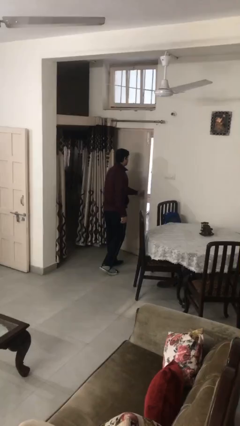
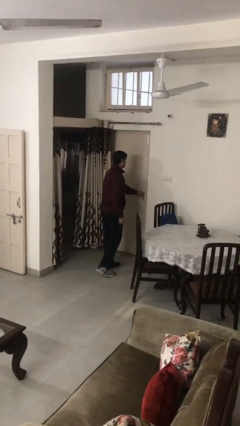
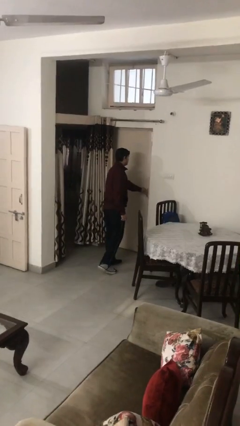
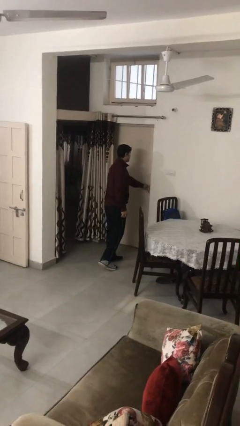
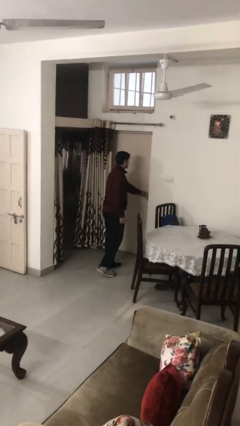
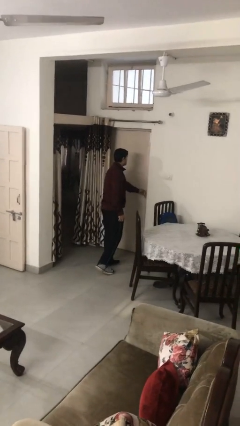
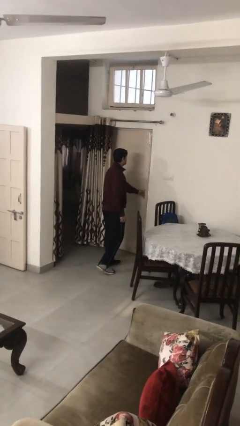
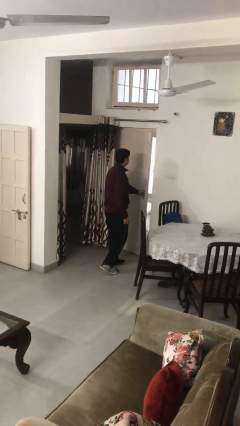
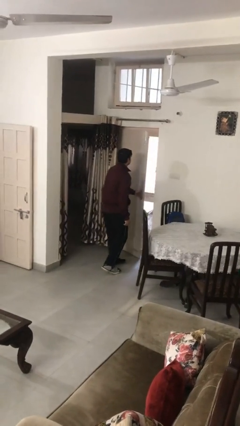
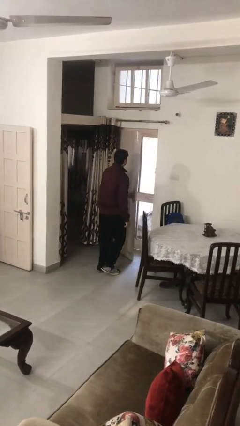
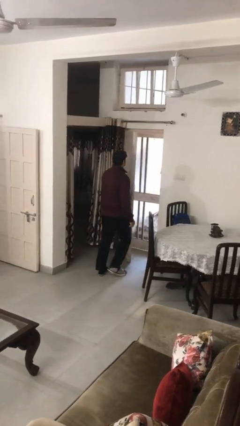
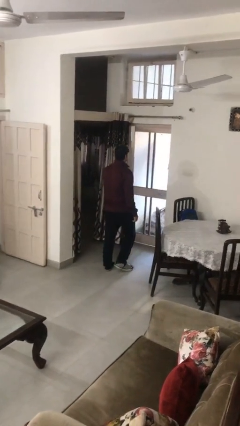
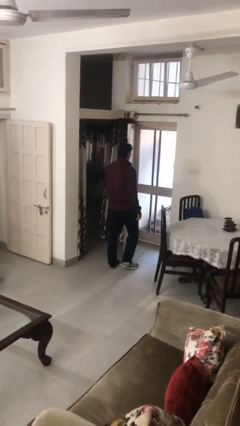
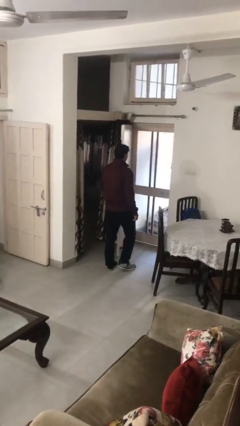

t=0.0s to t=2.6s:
person opens facility door

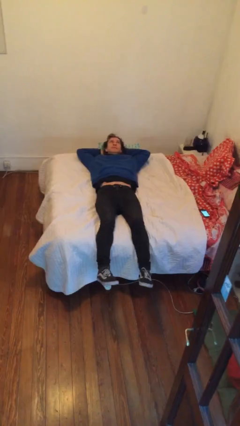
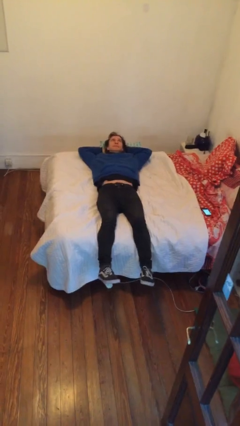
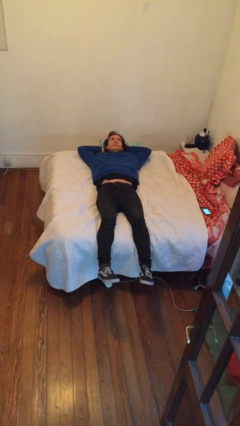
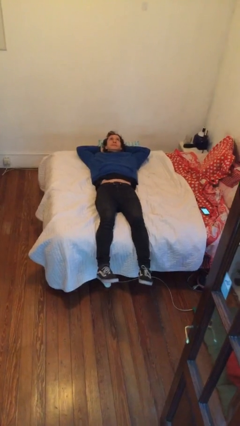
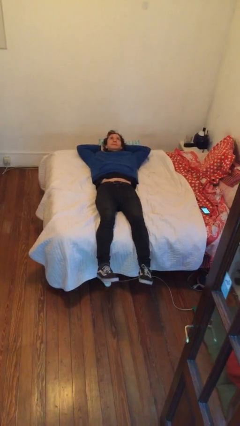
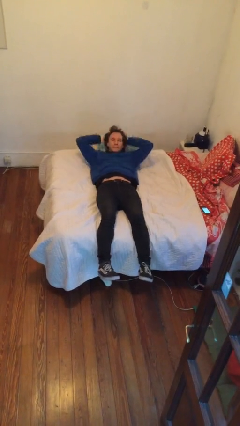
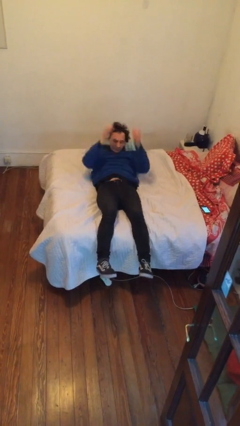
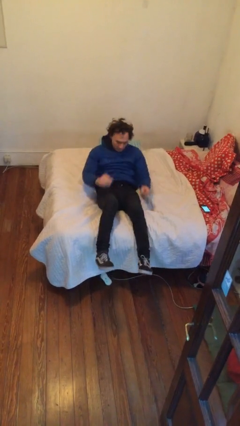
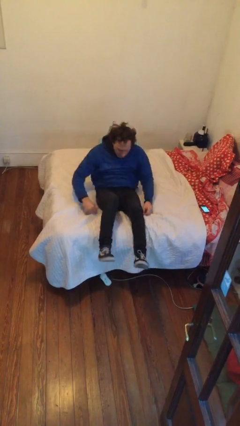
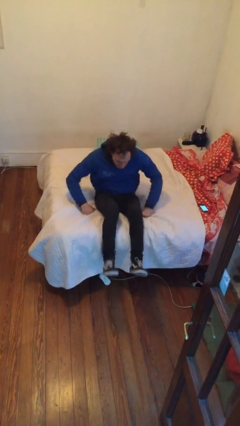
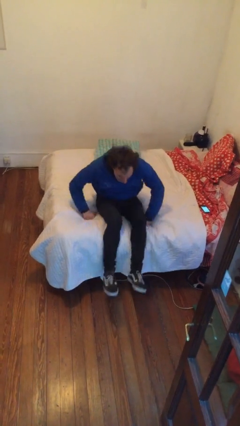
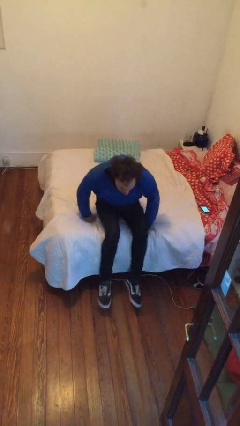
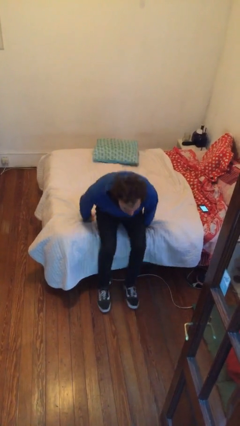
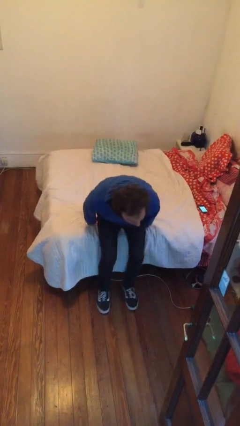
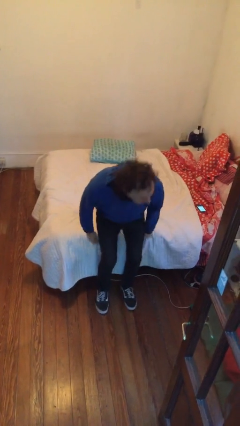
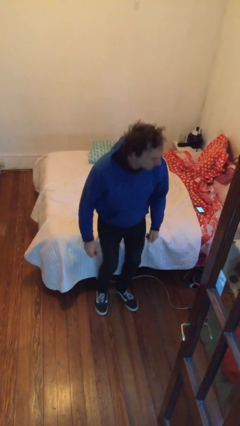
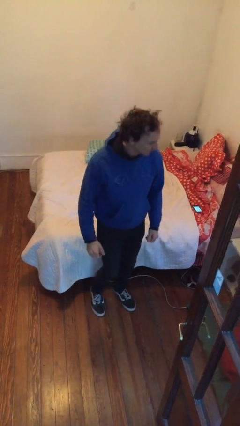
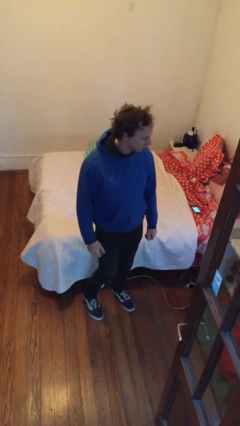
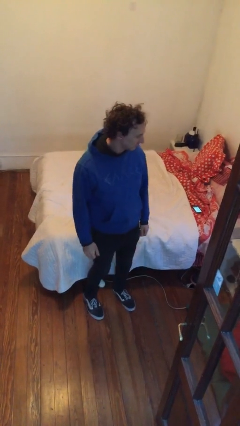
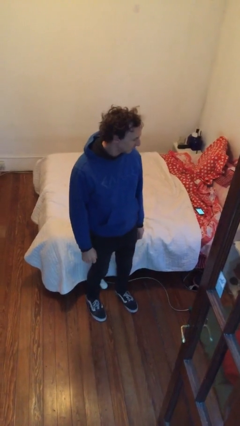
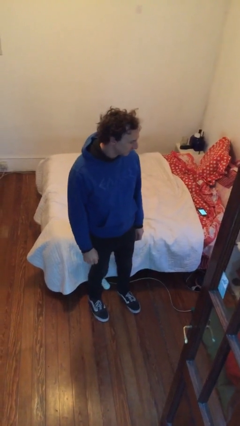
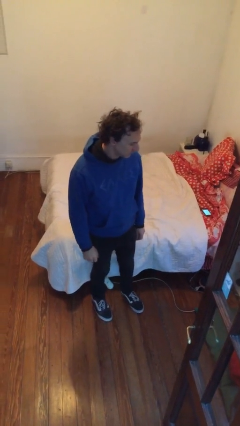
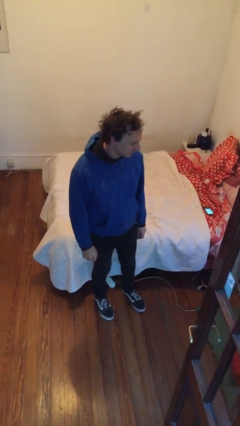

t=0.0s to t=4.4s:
person stands up

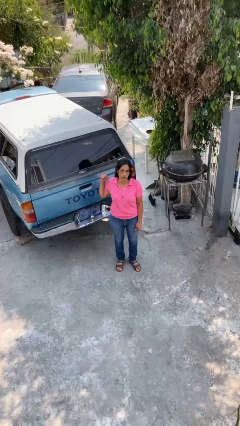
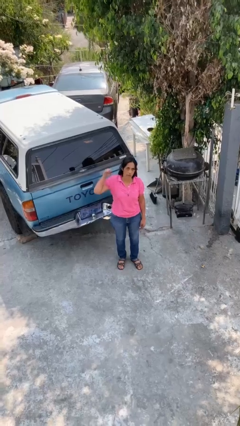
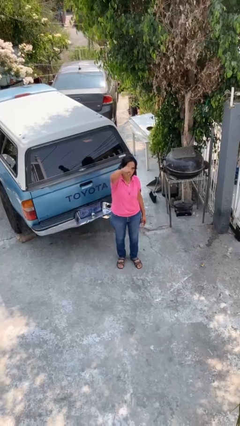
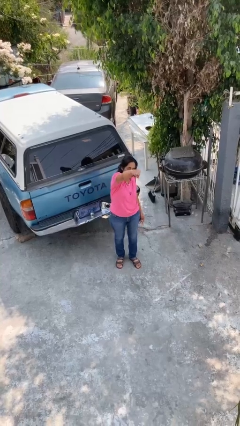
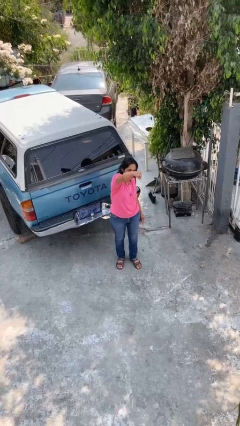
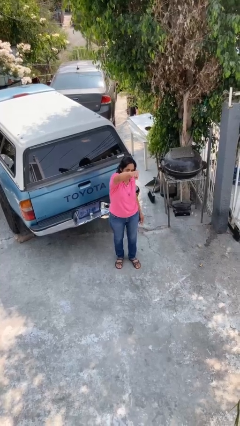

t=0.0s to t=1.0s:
person punches

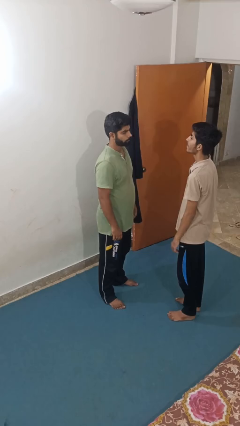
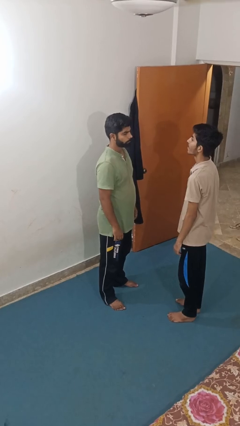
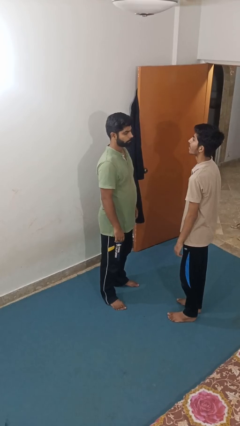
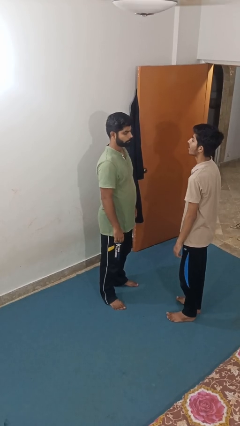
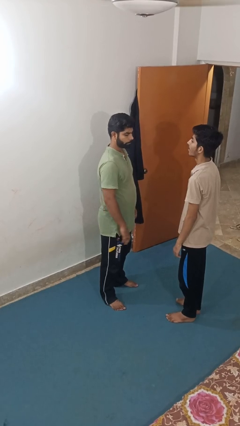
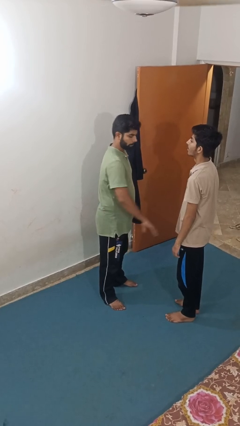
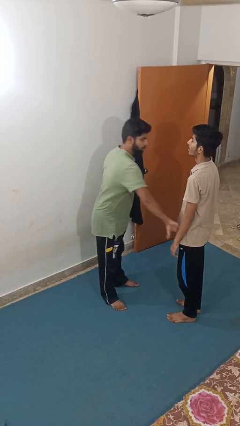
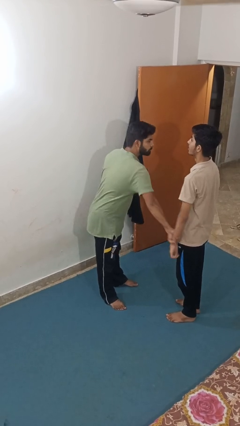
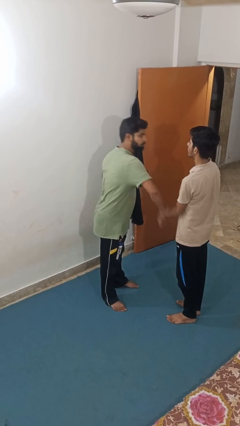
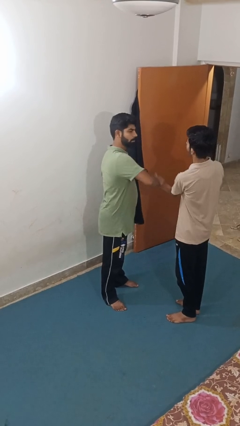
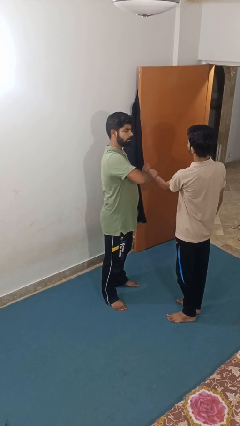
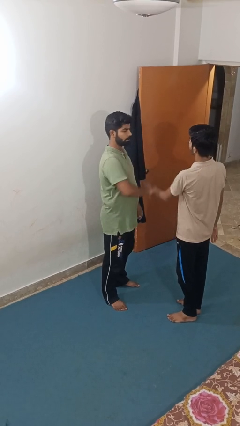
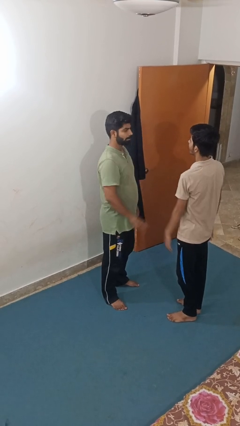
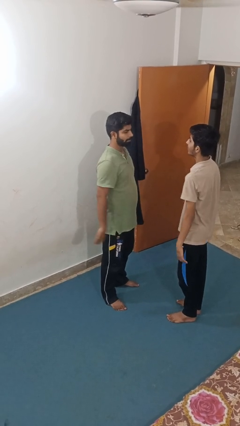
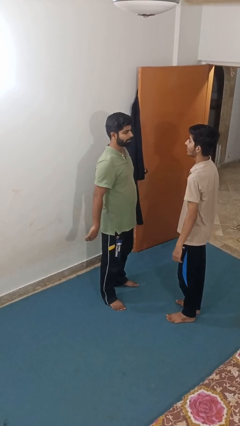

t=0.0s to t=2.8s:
person grabs person by forearm

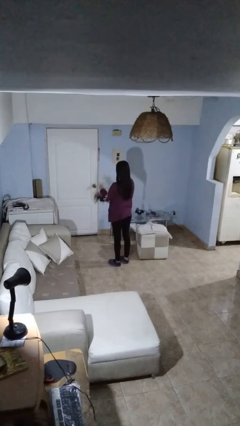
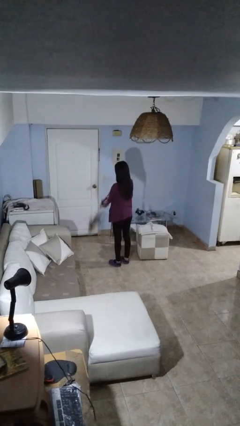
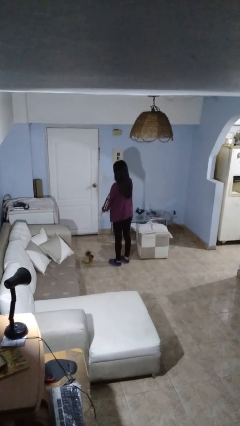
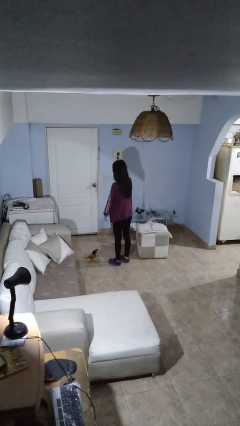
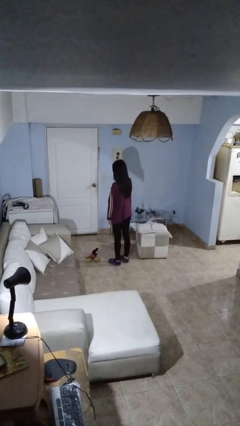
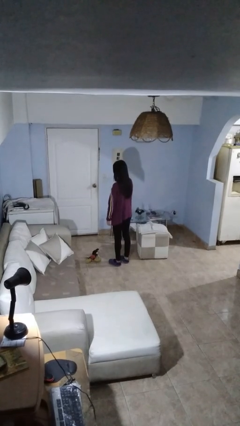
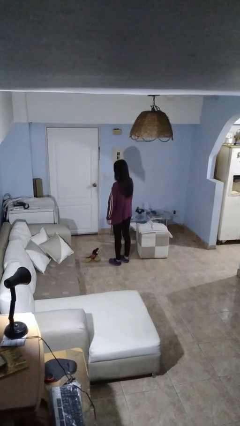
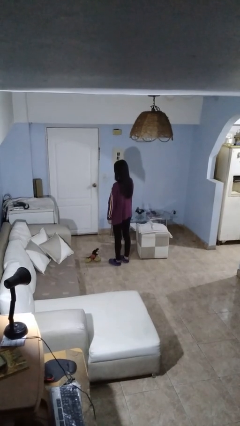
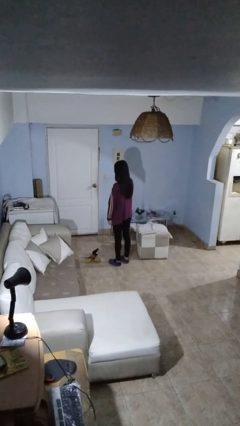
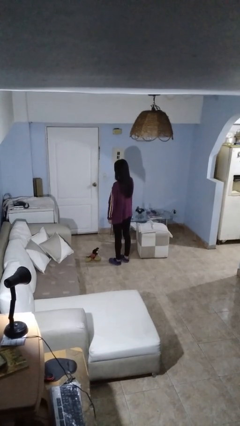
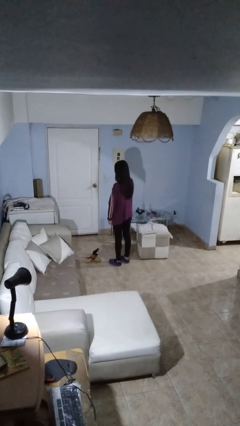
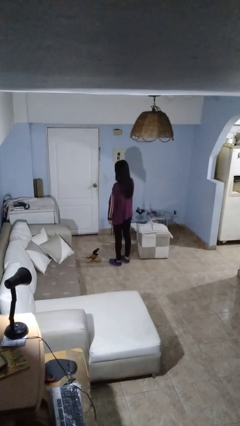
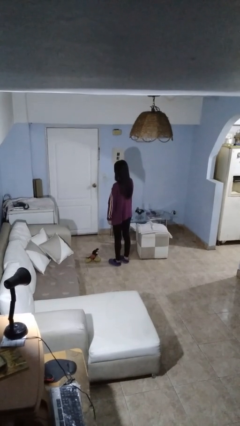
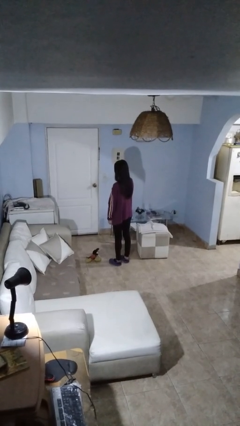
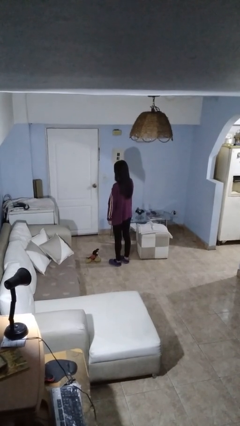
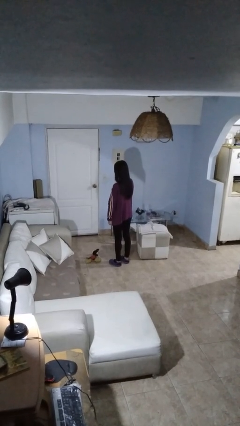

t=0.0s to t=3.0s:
person drops object

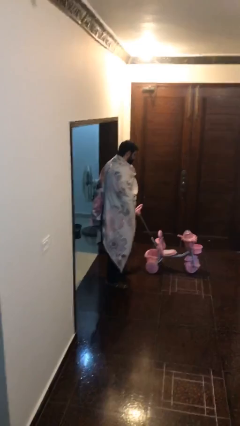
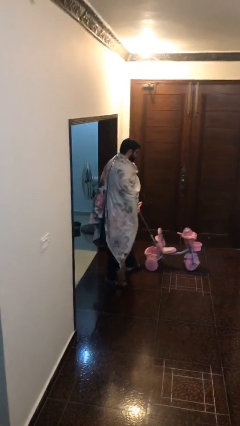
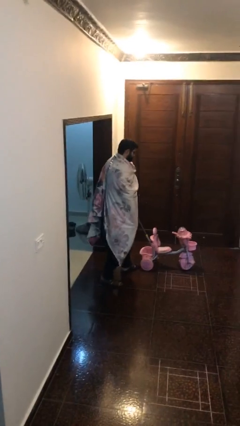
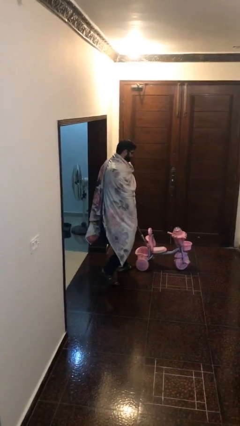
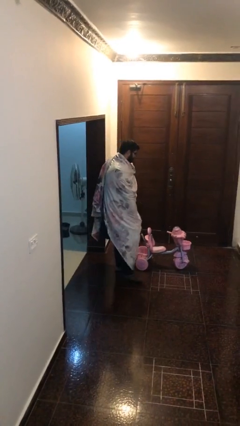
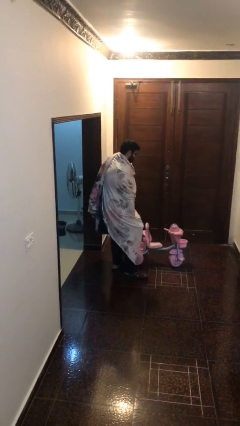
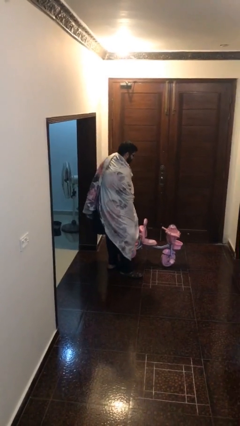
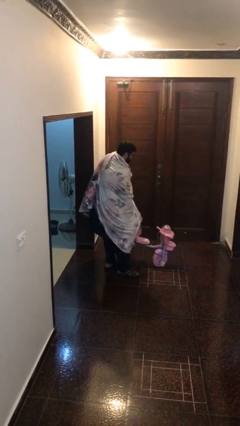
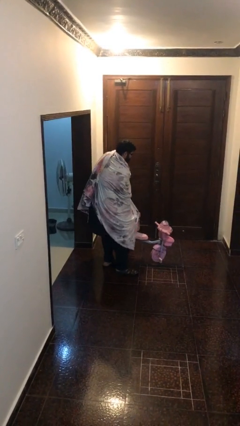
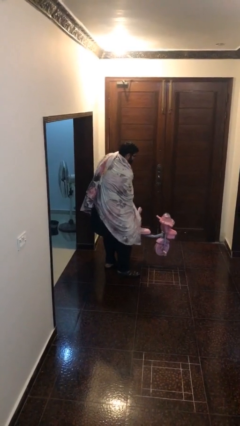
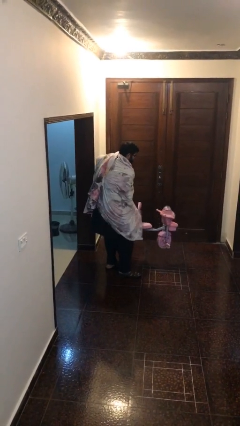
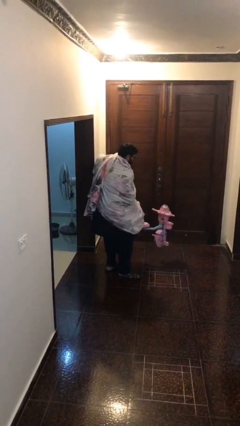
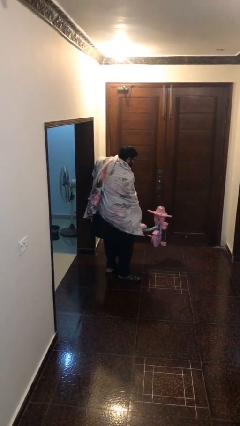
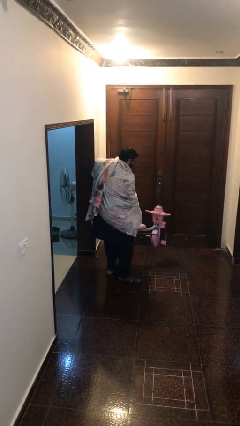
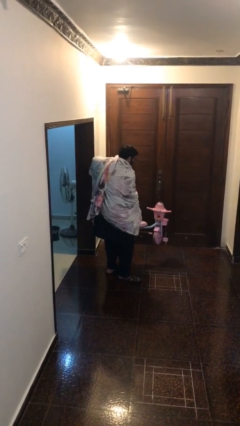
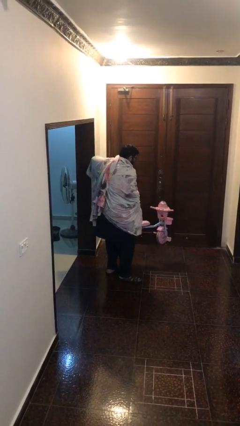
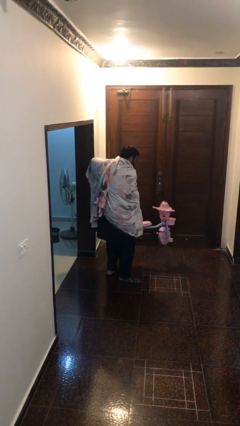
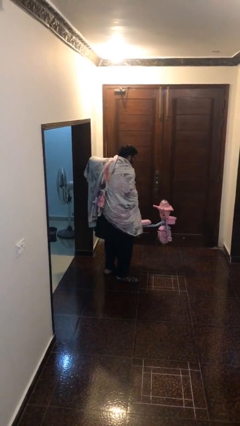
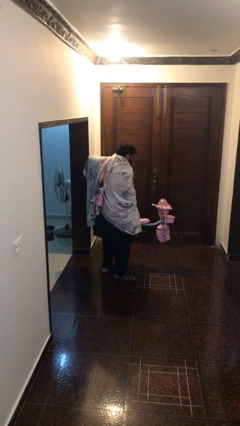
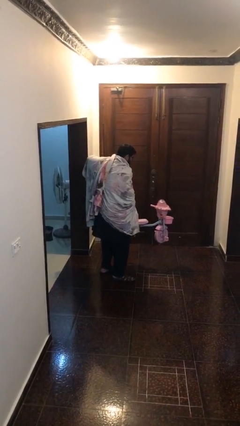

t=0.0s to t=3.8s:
person picks up object from floor
